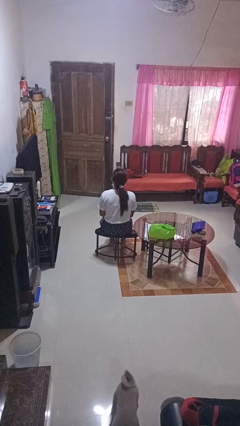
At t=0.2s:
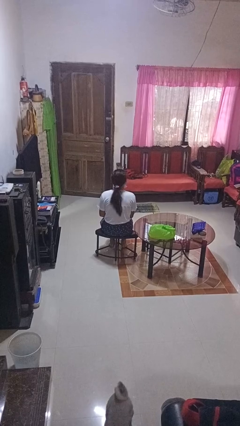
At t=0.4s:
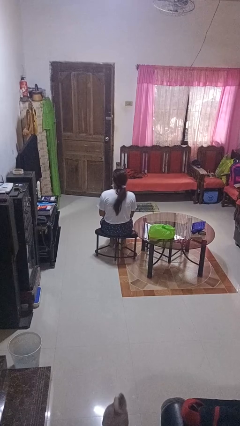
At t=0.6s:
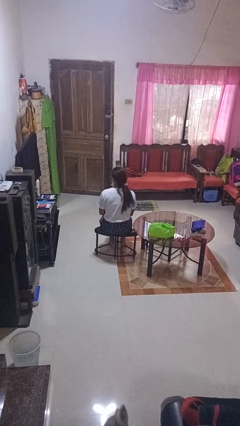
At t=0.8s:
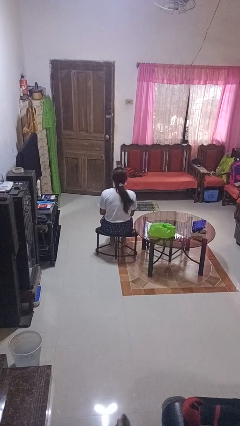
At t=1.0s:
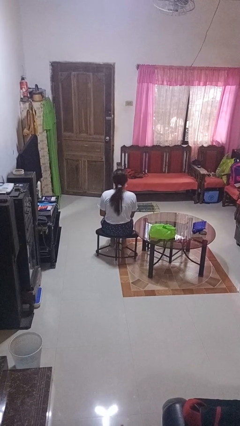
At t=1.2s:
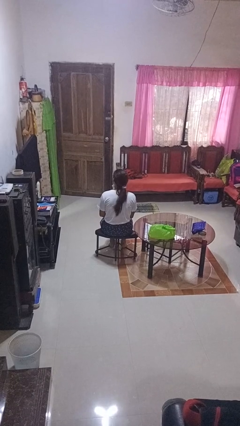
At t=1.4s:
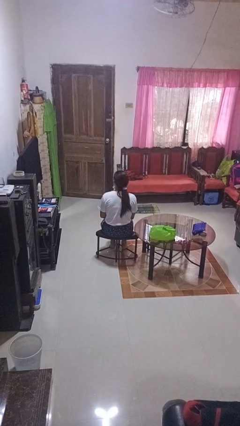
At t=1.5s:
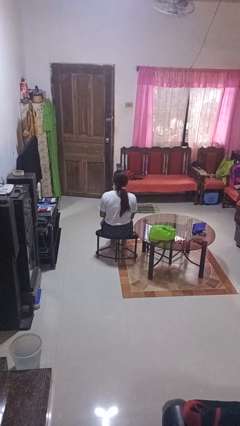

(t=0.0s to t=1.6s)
person shakes head

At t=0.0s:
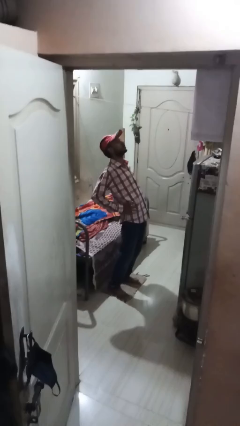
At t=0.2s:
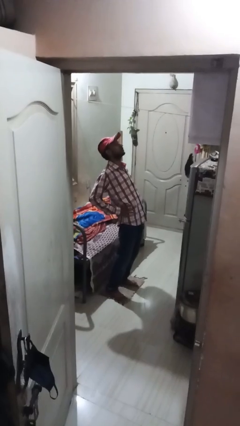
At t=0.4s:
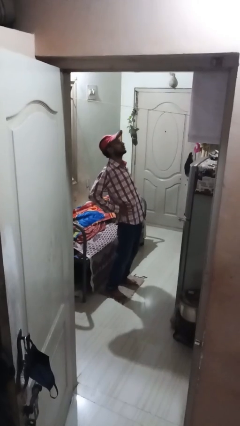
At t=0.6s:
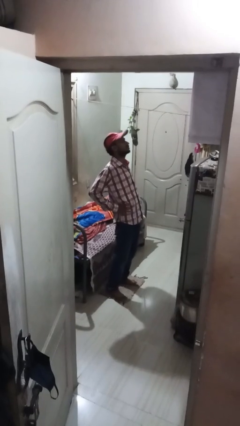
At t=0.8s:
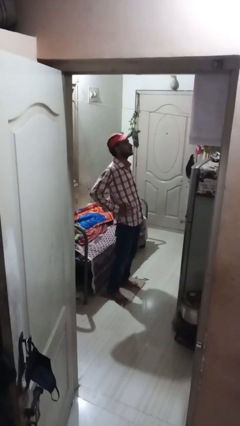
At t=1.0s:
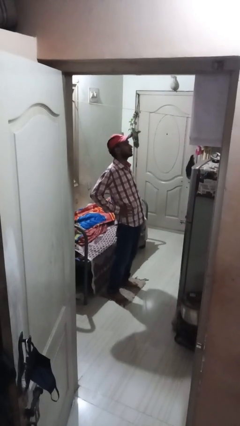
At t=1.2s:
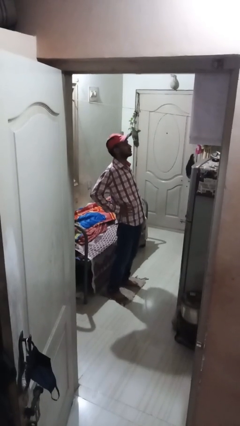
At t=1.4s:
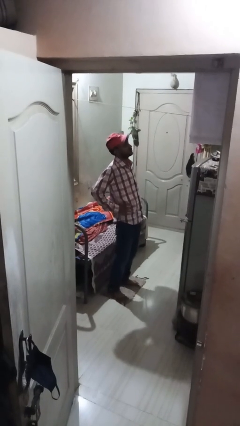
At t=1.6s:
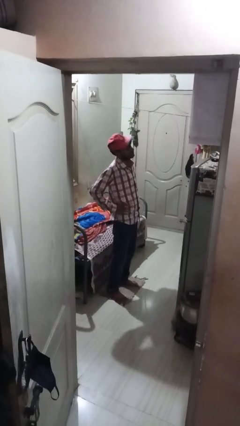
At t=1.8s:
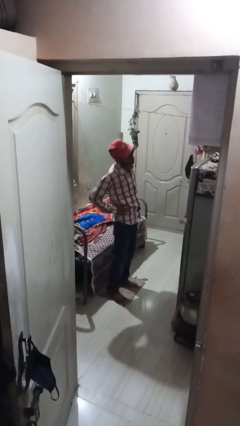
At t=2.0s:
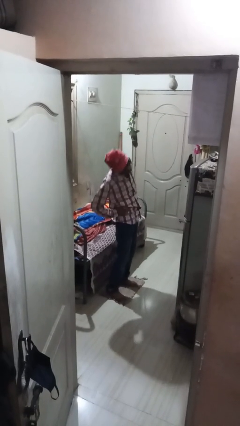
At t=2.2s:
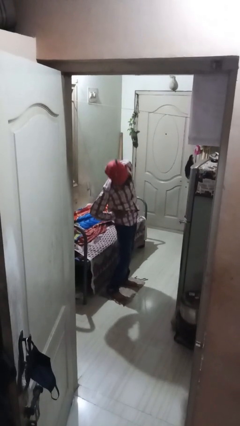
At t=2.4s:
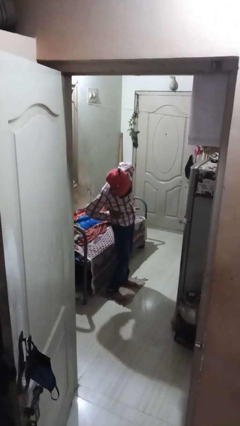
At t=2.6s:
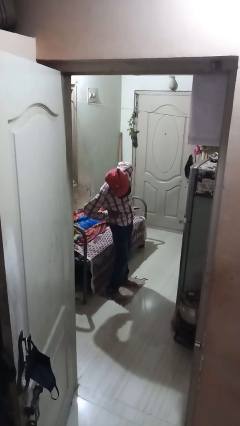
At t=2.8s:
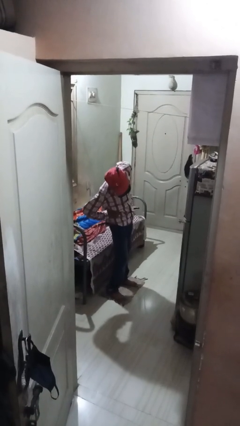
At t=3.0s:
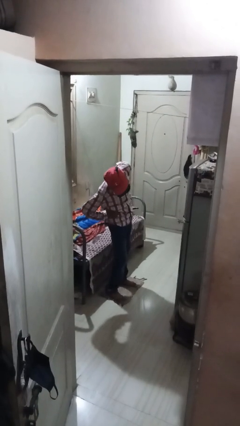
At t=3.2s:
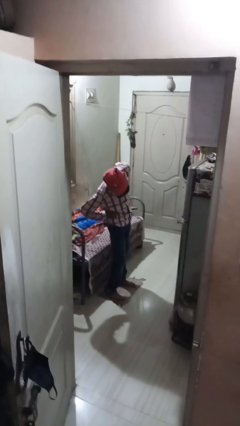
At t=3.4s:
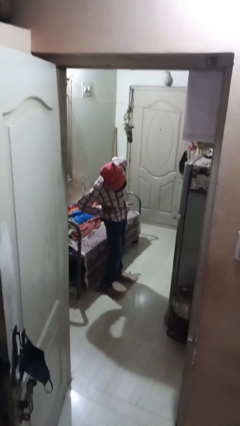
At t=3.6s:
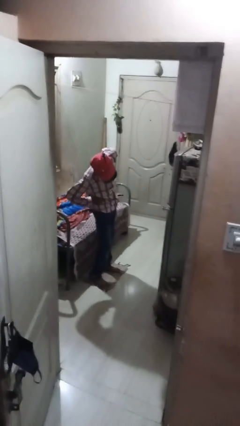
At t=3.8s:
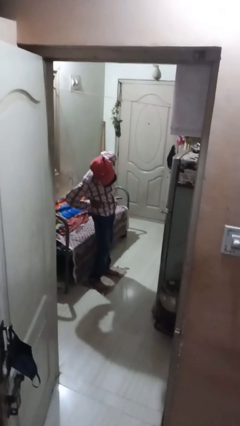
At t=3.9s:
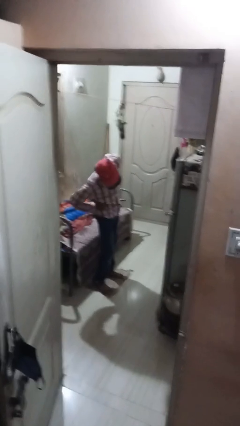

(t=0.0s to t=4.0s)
person stretches arms to side

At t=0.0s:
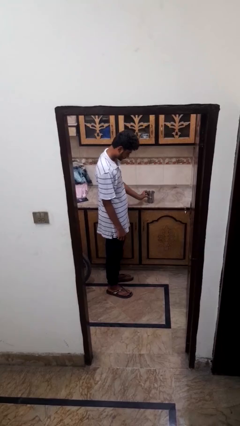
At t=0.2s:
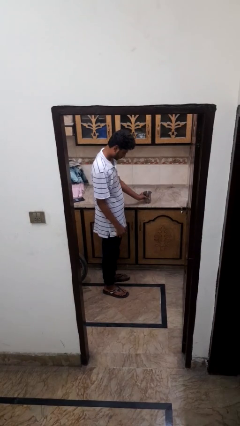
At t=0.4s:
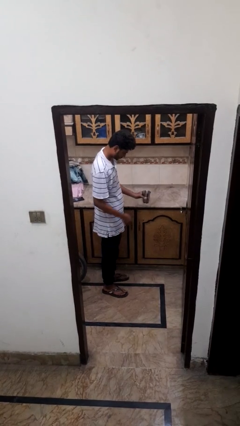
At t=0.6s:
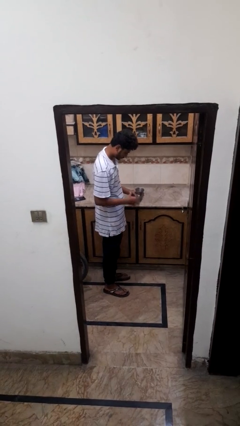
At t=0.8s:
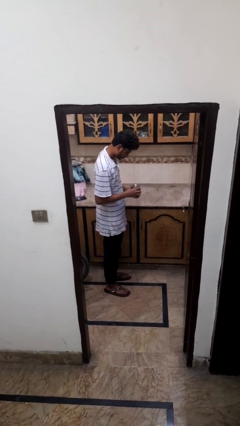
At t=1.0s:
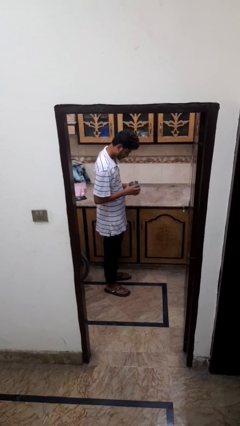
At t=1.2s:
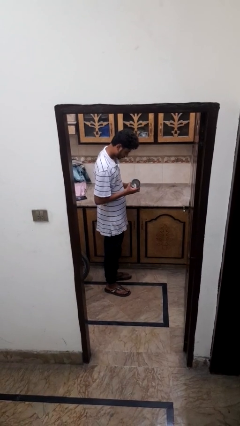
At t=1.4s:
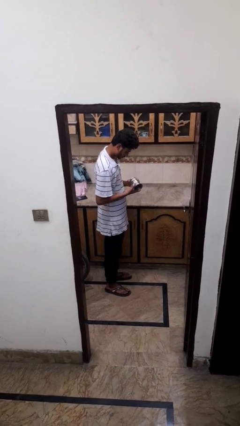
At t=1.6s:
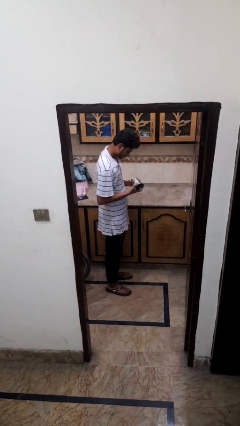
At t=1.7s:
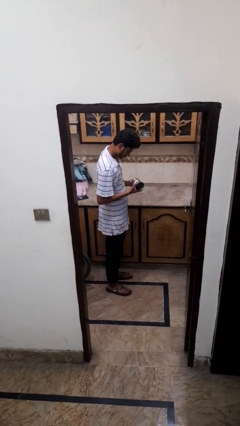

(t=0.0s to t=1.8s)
person picks up object from countertop

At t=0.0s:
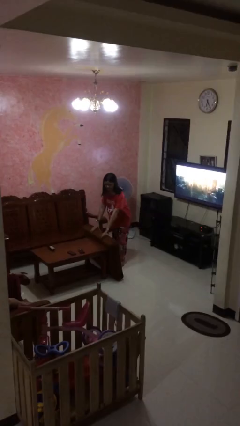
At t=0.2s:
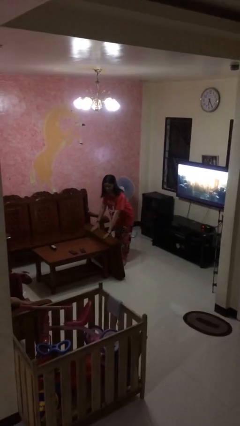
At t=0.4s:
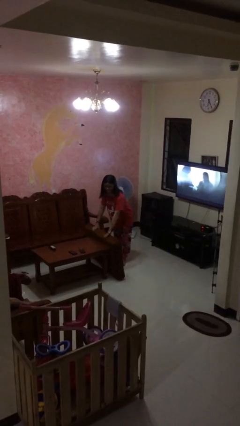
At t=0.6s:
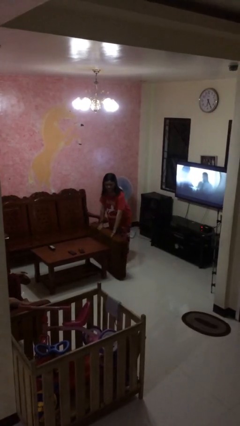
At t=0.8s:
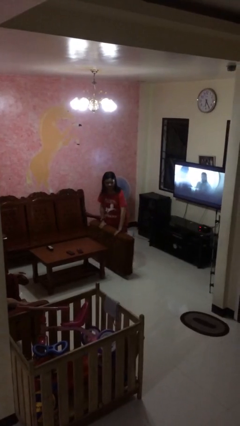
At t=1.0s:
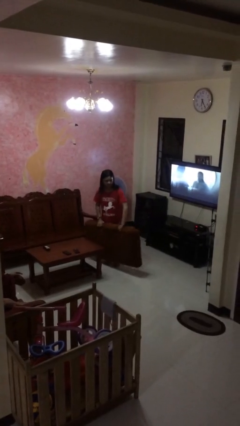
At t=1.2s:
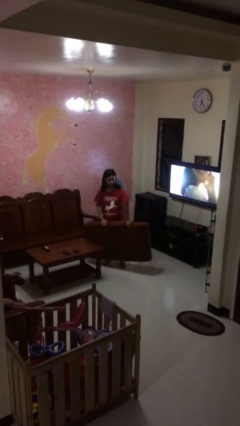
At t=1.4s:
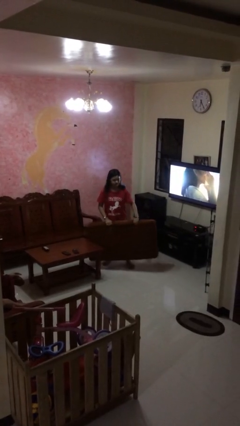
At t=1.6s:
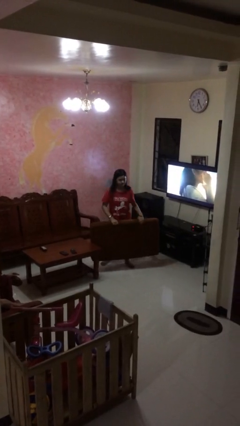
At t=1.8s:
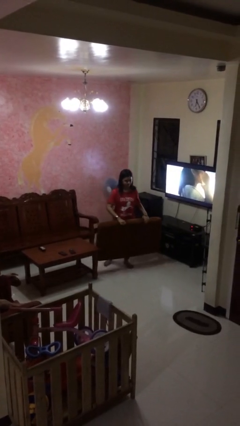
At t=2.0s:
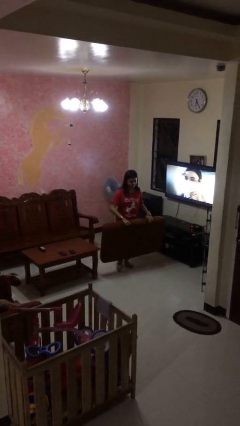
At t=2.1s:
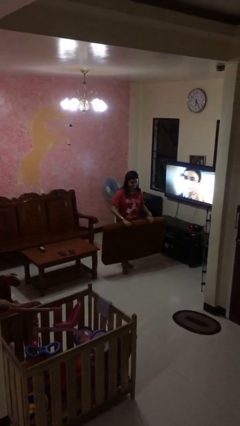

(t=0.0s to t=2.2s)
person picks up object from floor

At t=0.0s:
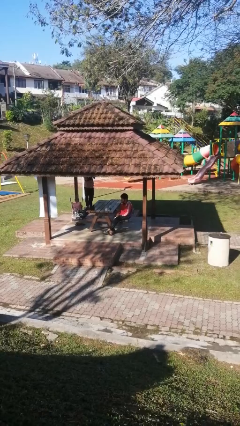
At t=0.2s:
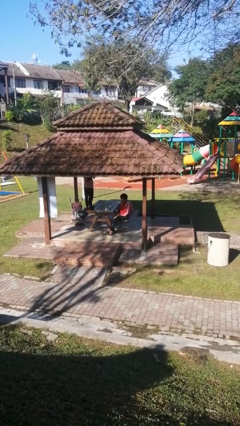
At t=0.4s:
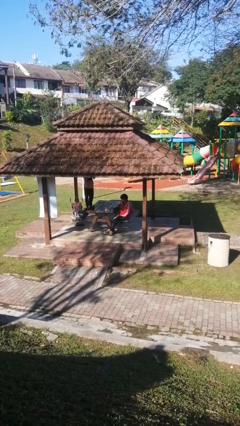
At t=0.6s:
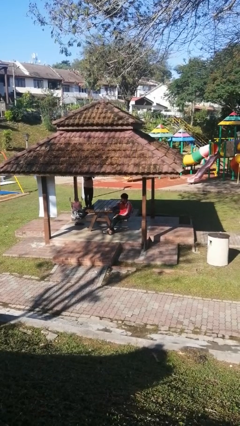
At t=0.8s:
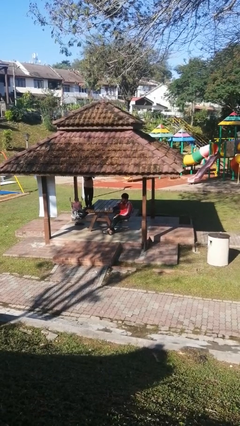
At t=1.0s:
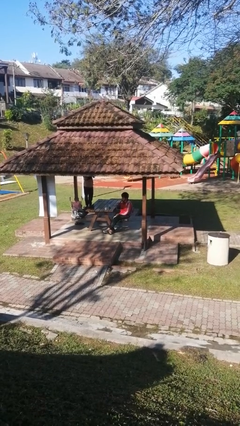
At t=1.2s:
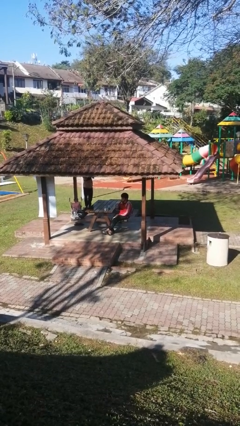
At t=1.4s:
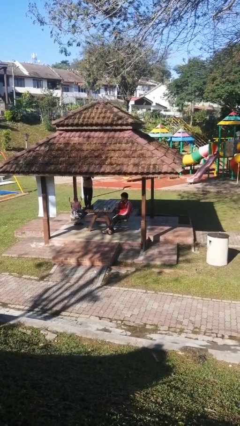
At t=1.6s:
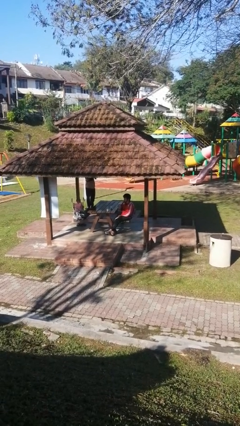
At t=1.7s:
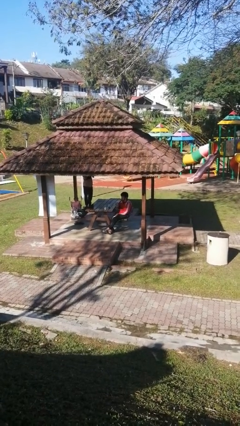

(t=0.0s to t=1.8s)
person picks up object from table

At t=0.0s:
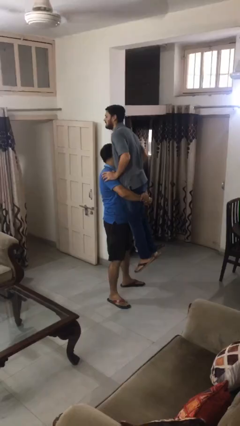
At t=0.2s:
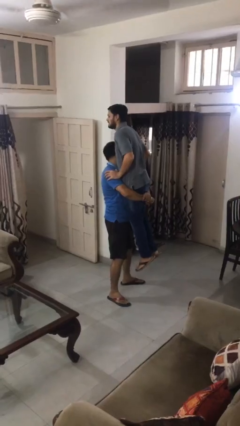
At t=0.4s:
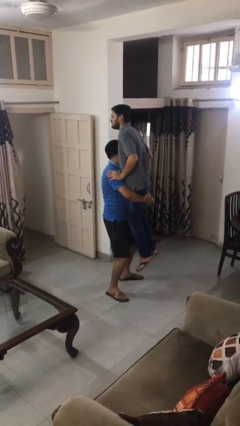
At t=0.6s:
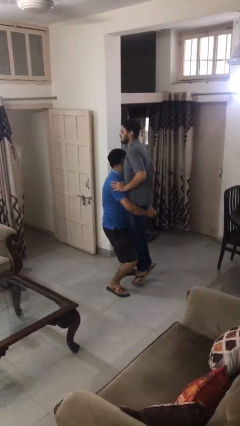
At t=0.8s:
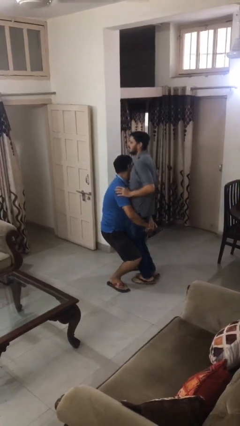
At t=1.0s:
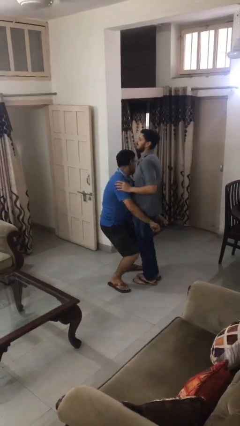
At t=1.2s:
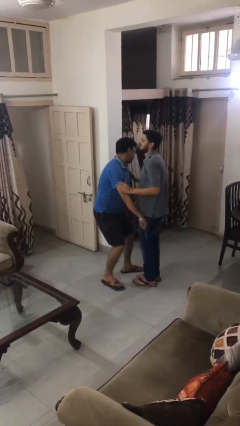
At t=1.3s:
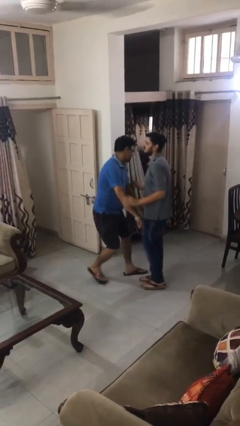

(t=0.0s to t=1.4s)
person puts down person

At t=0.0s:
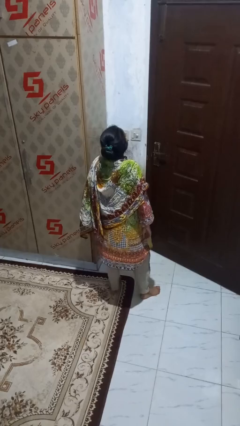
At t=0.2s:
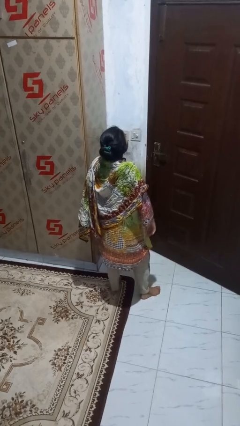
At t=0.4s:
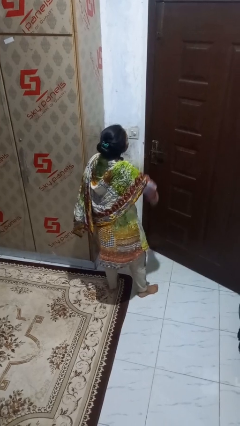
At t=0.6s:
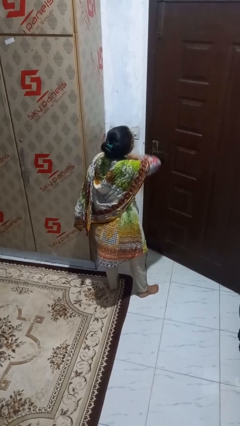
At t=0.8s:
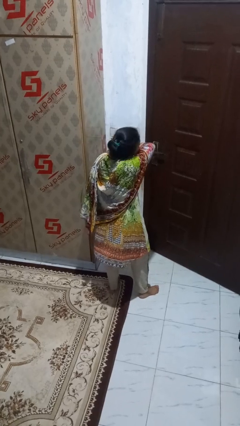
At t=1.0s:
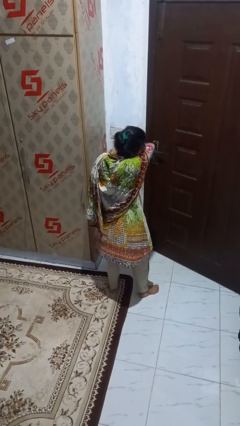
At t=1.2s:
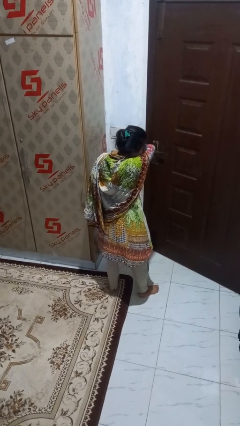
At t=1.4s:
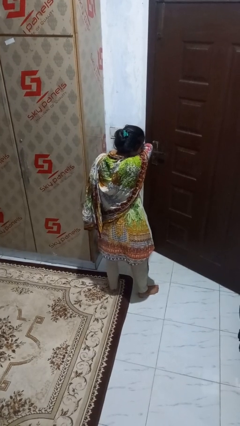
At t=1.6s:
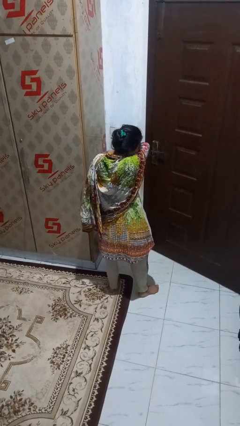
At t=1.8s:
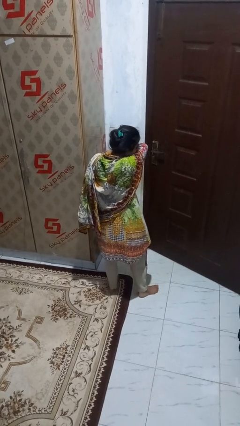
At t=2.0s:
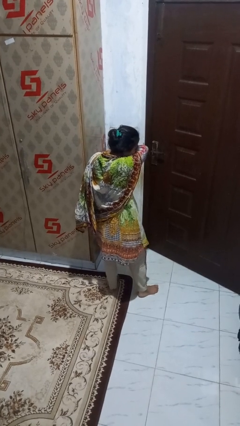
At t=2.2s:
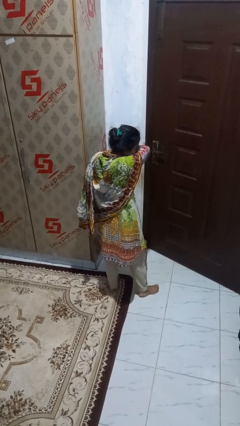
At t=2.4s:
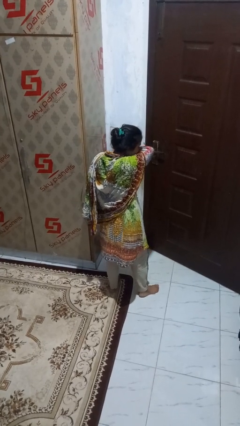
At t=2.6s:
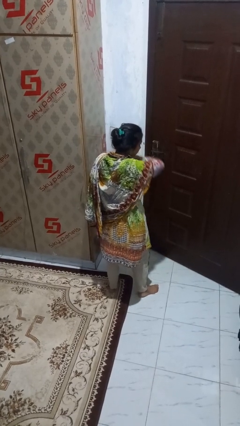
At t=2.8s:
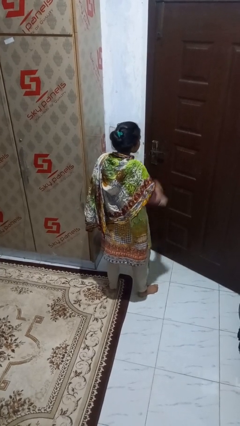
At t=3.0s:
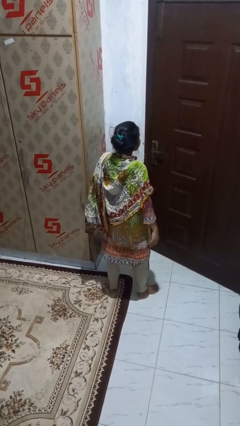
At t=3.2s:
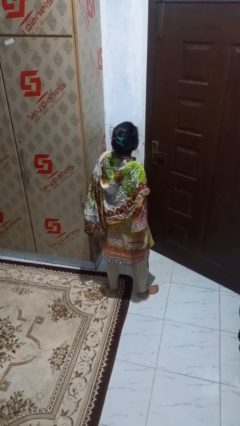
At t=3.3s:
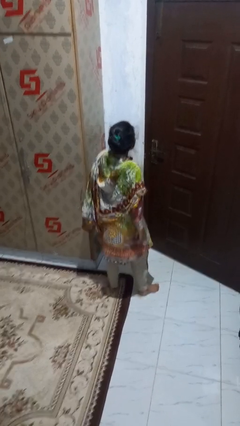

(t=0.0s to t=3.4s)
person sneezes into arm

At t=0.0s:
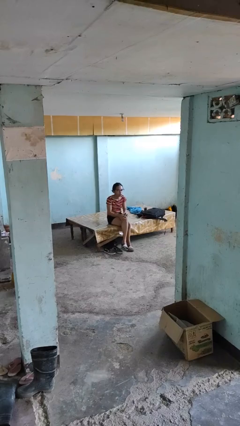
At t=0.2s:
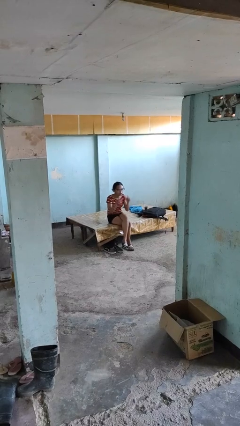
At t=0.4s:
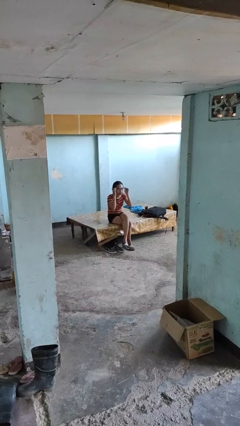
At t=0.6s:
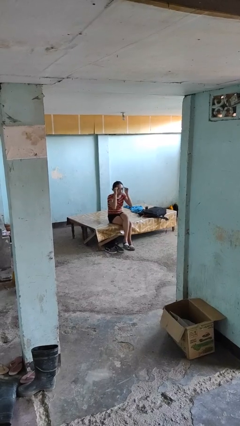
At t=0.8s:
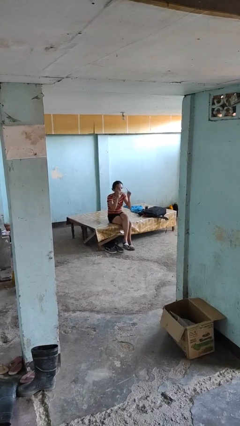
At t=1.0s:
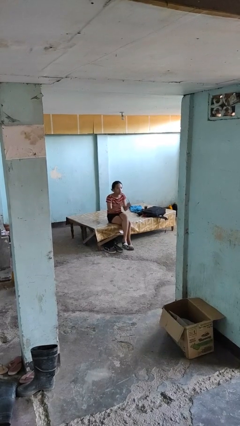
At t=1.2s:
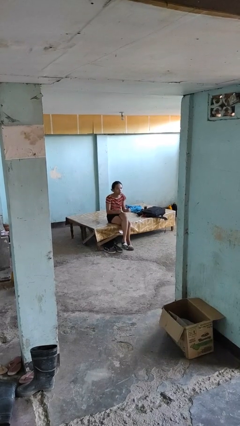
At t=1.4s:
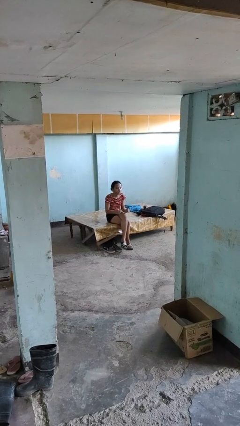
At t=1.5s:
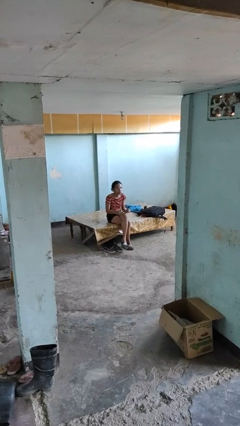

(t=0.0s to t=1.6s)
person takes off glasses
